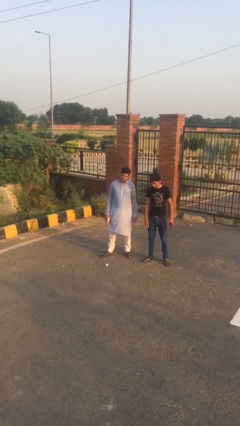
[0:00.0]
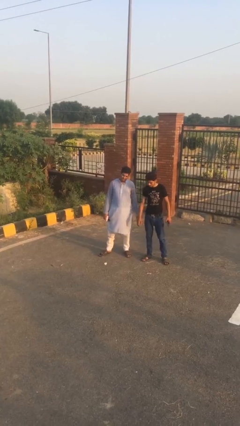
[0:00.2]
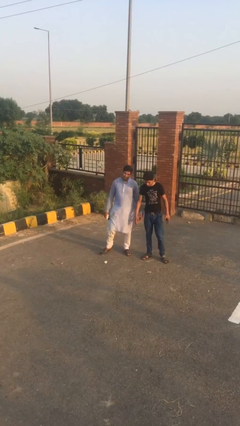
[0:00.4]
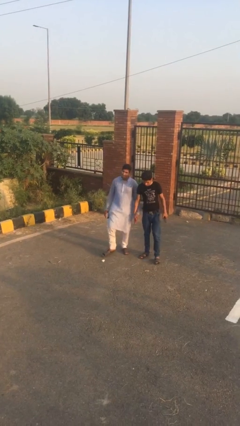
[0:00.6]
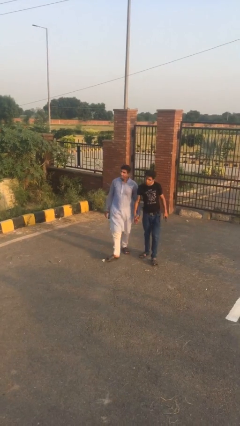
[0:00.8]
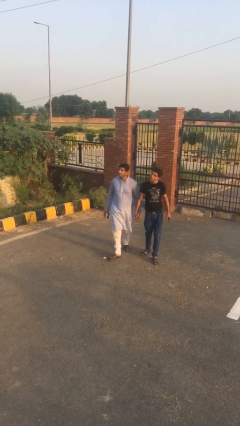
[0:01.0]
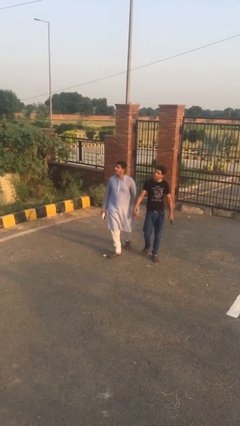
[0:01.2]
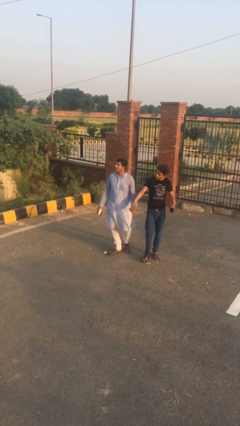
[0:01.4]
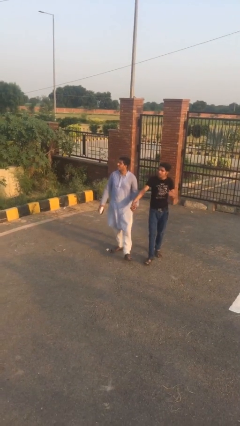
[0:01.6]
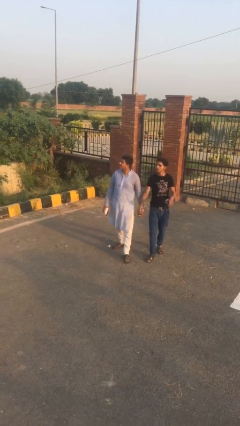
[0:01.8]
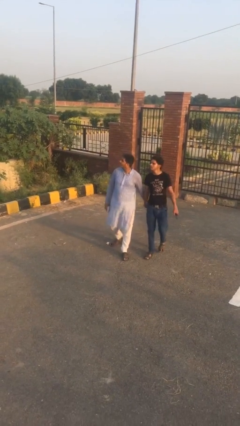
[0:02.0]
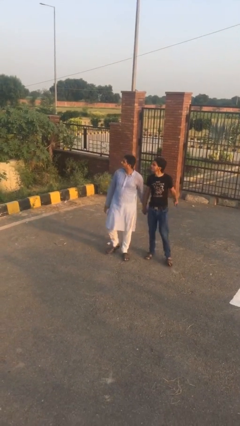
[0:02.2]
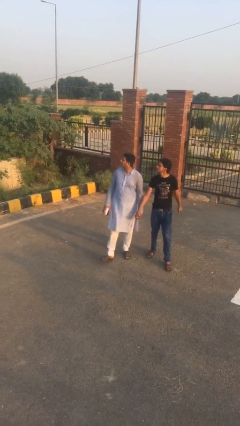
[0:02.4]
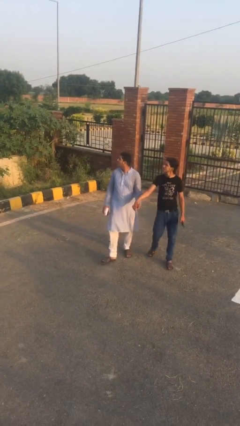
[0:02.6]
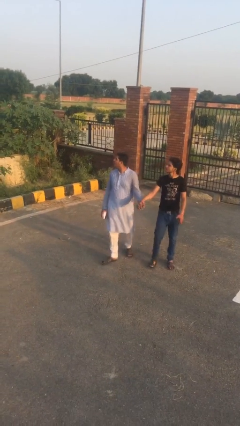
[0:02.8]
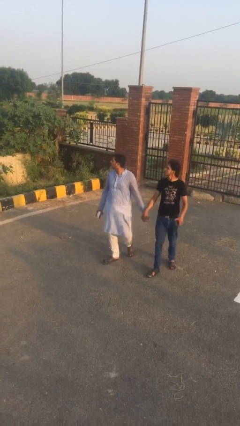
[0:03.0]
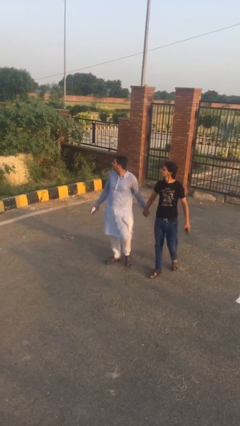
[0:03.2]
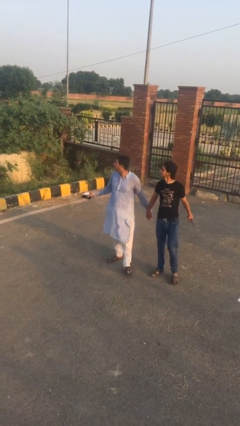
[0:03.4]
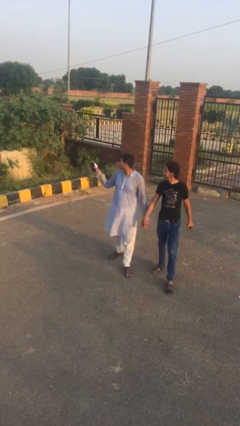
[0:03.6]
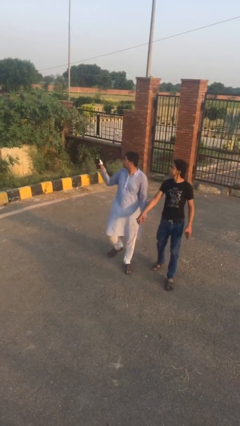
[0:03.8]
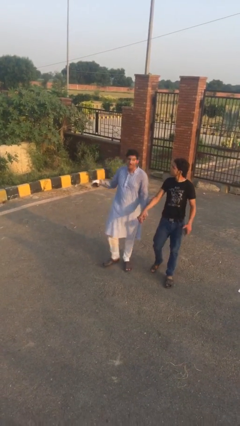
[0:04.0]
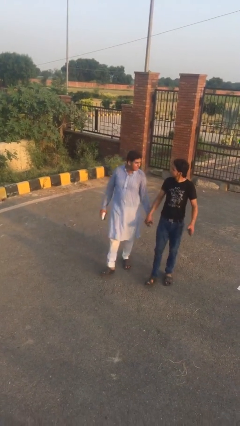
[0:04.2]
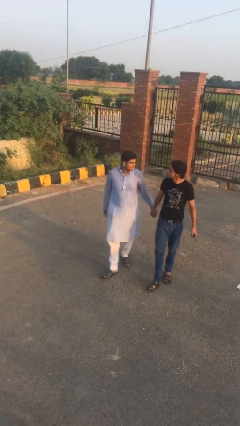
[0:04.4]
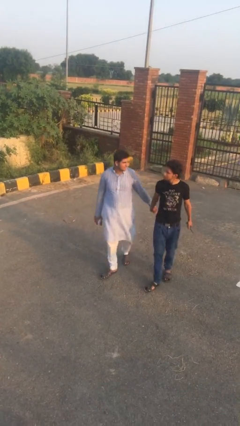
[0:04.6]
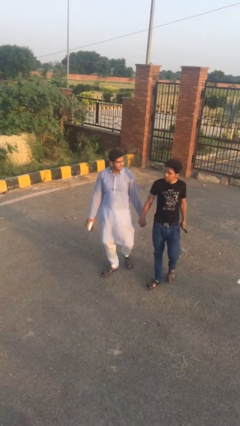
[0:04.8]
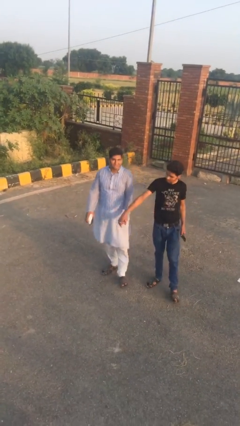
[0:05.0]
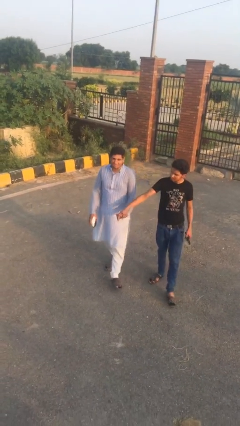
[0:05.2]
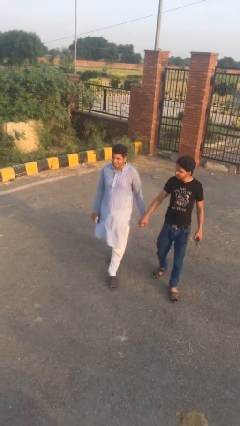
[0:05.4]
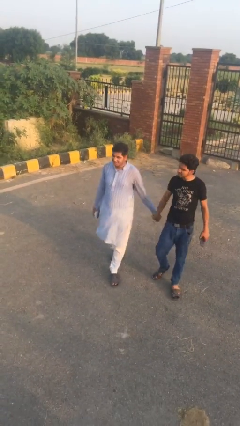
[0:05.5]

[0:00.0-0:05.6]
person holds hand

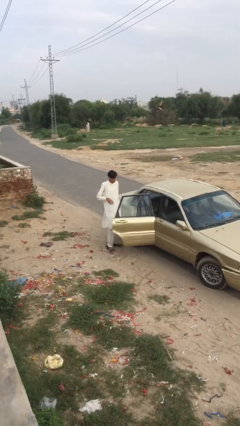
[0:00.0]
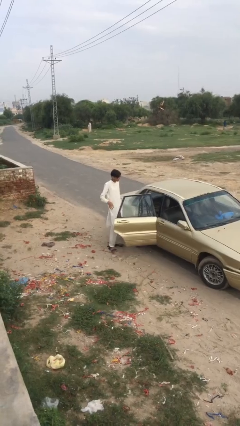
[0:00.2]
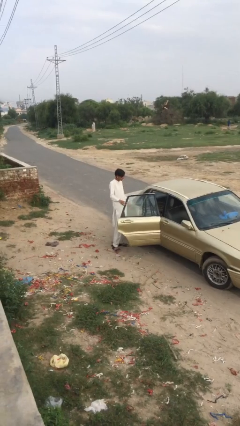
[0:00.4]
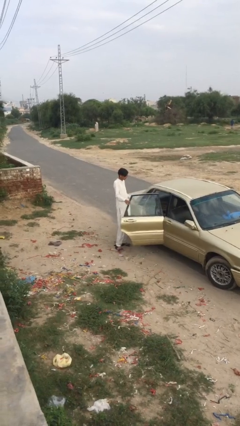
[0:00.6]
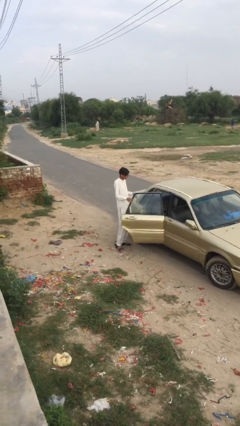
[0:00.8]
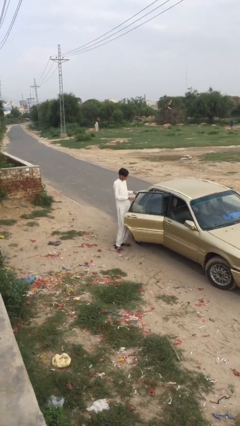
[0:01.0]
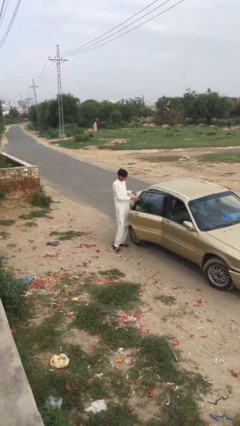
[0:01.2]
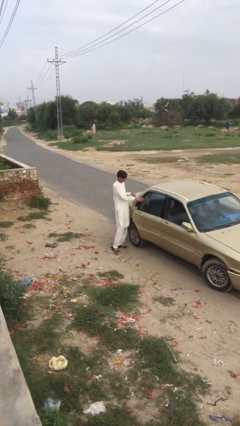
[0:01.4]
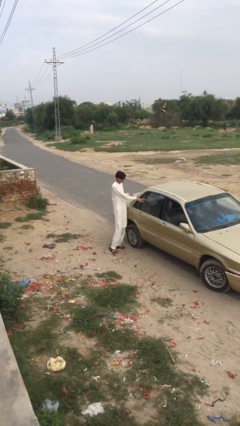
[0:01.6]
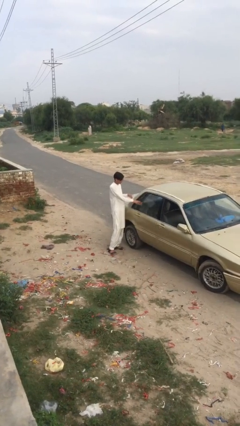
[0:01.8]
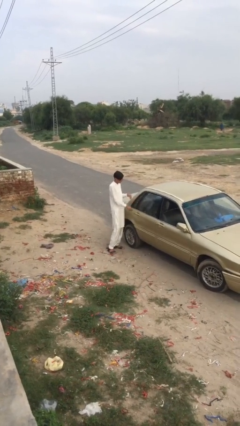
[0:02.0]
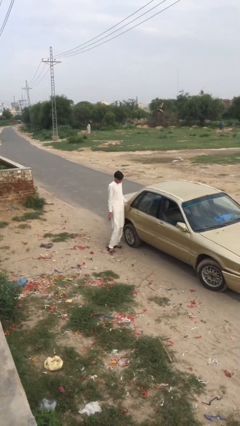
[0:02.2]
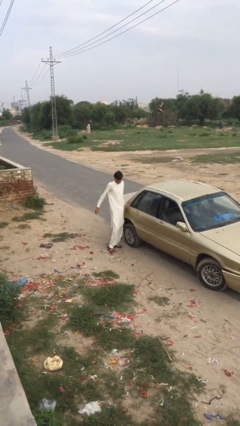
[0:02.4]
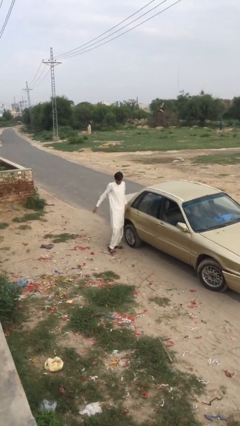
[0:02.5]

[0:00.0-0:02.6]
person closes car door

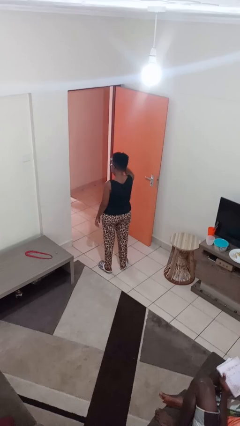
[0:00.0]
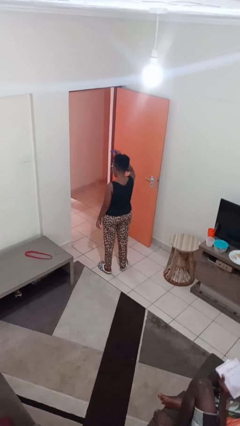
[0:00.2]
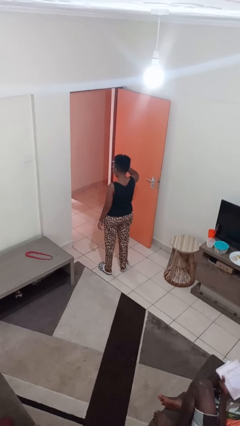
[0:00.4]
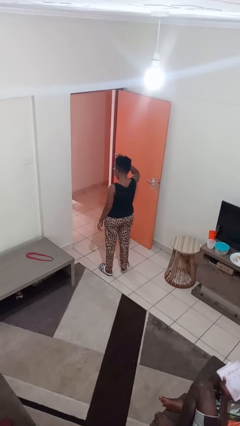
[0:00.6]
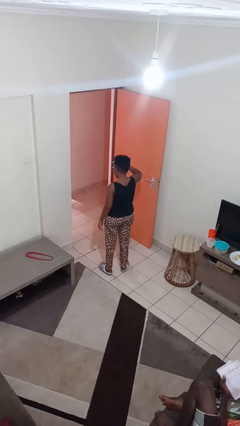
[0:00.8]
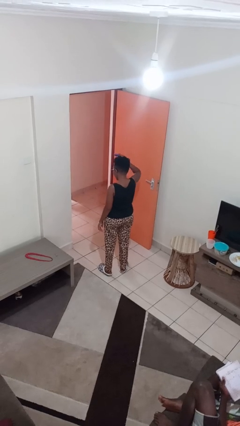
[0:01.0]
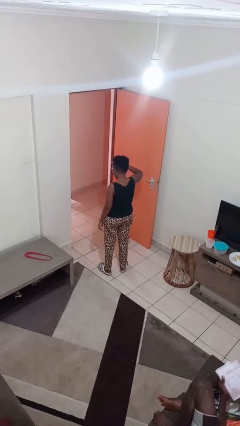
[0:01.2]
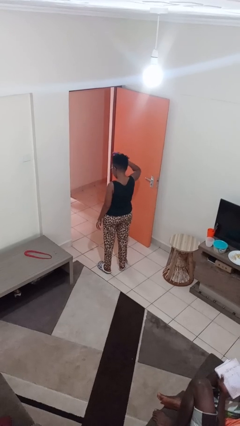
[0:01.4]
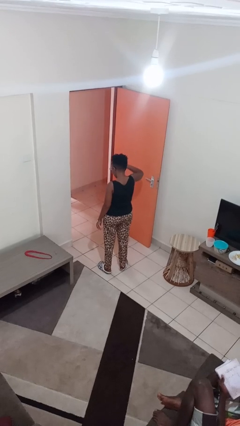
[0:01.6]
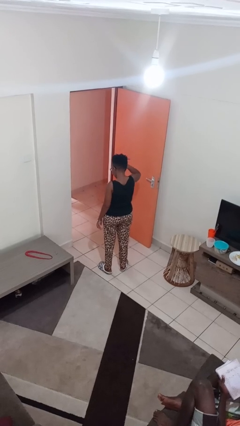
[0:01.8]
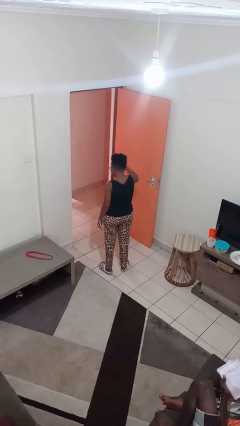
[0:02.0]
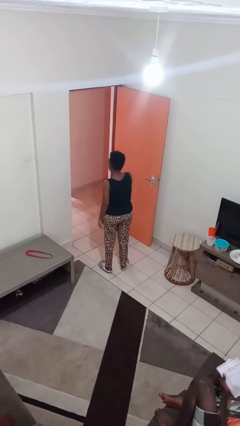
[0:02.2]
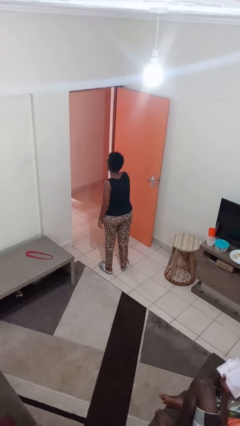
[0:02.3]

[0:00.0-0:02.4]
person brushes hair

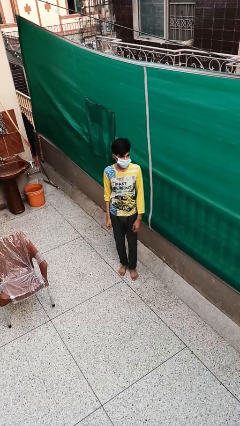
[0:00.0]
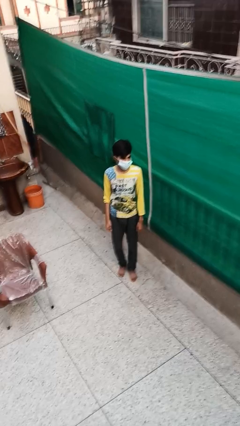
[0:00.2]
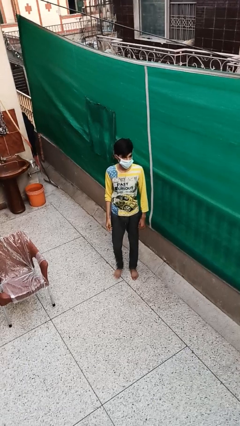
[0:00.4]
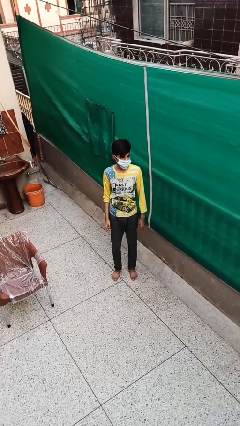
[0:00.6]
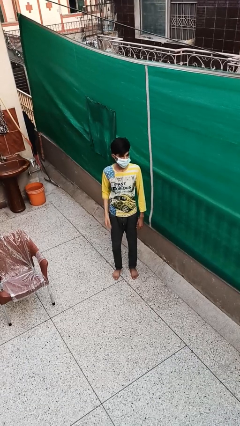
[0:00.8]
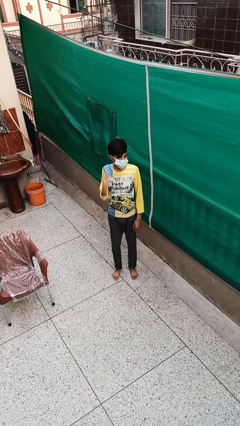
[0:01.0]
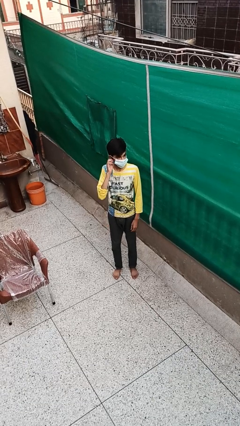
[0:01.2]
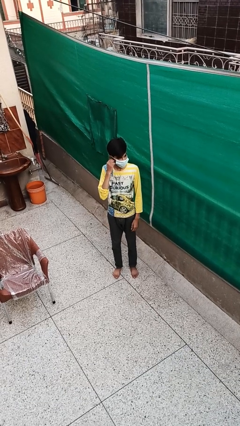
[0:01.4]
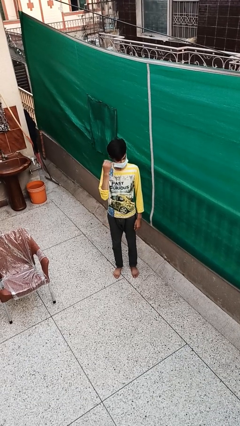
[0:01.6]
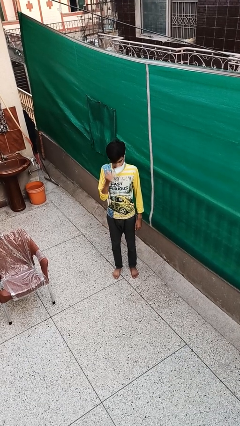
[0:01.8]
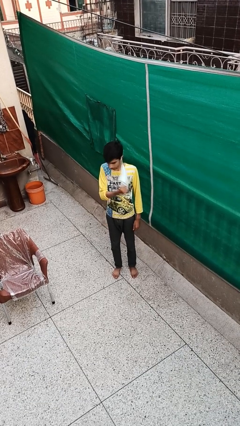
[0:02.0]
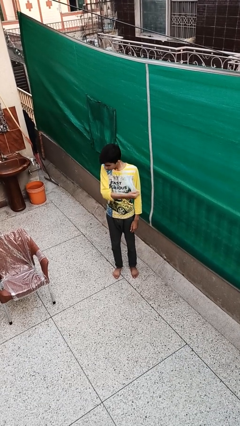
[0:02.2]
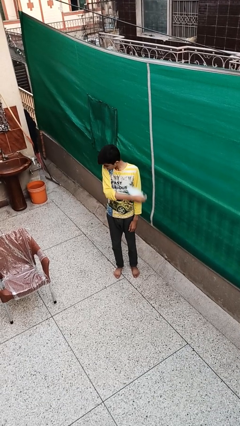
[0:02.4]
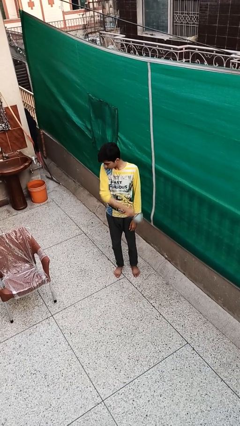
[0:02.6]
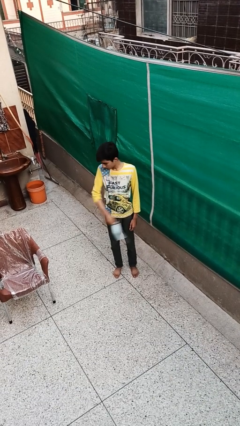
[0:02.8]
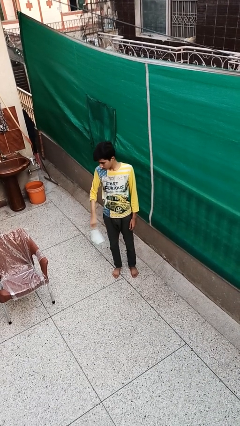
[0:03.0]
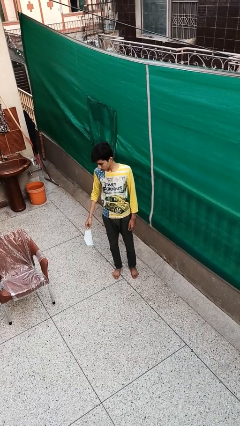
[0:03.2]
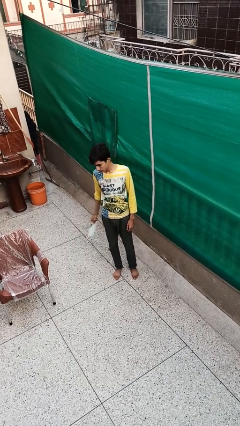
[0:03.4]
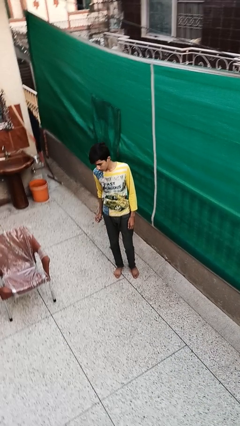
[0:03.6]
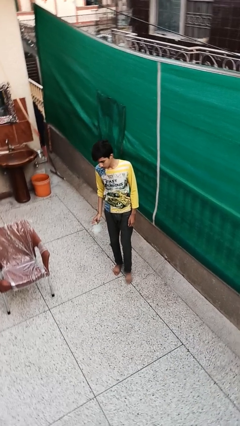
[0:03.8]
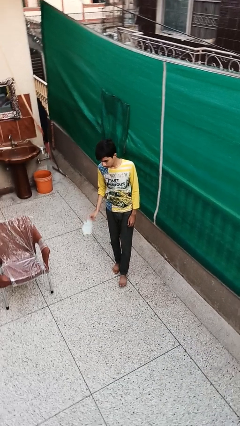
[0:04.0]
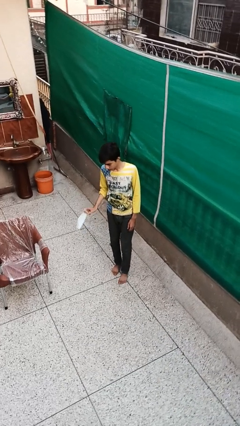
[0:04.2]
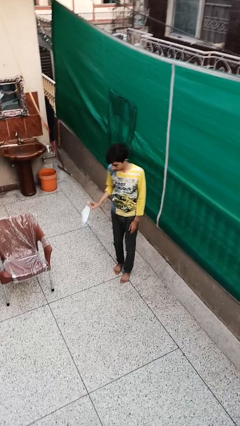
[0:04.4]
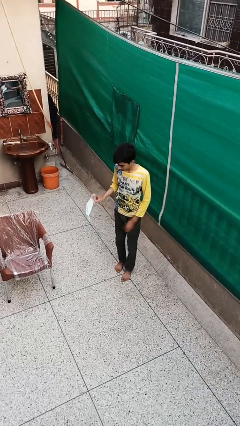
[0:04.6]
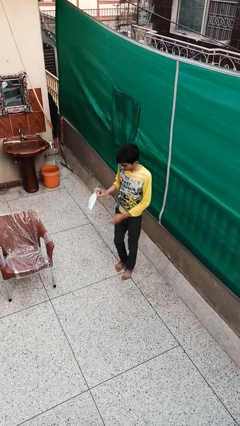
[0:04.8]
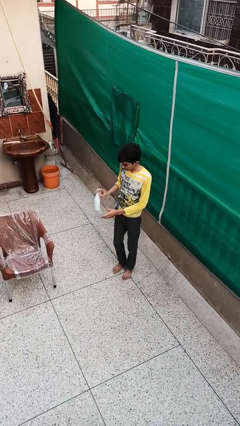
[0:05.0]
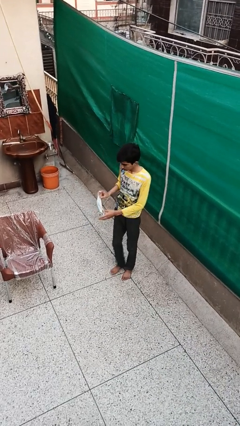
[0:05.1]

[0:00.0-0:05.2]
person takes off facemask

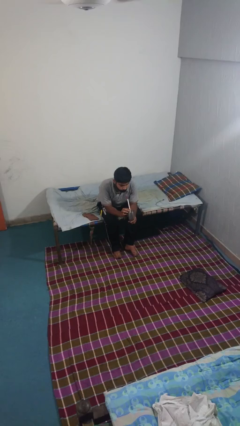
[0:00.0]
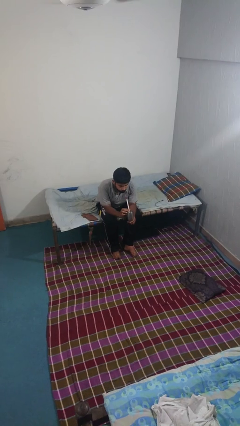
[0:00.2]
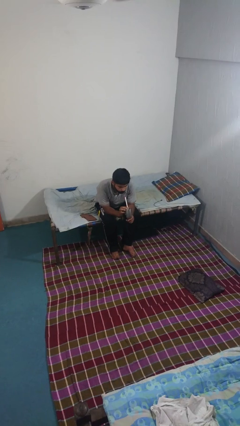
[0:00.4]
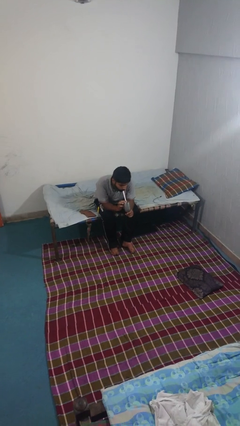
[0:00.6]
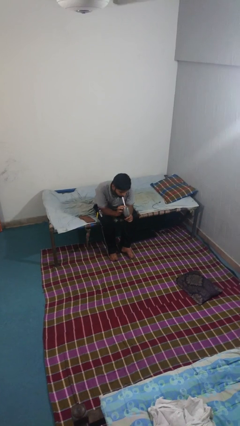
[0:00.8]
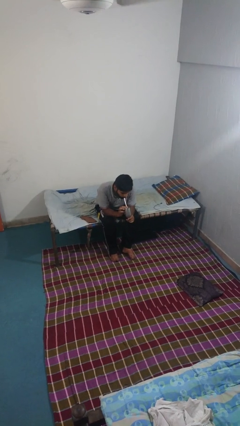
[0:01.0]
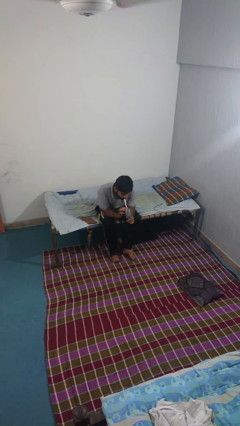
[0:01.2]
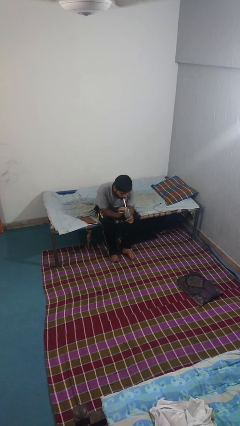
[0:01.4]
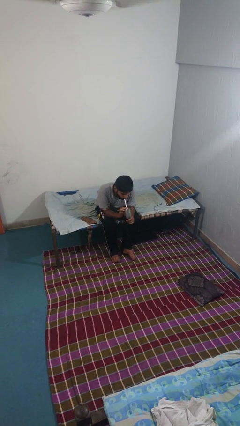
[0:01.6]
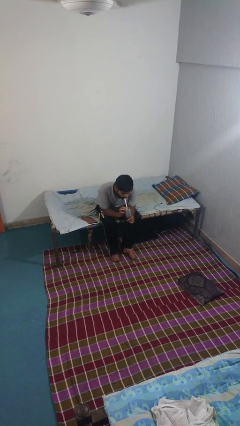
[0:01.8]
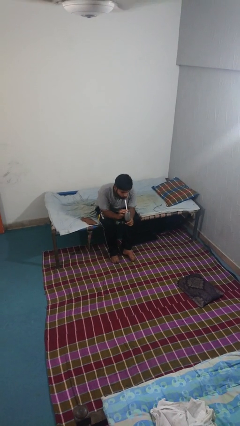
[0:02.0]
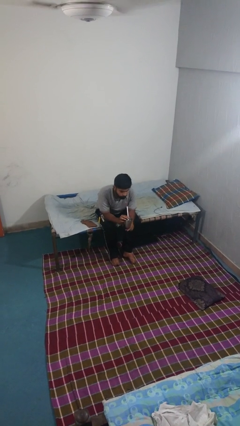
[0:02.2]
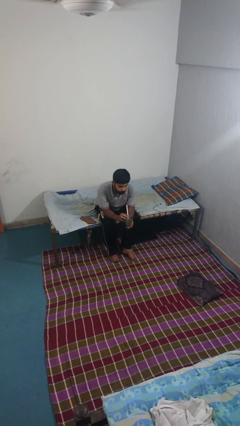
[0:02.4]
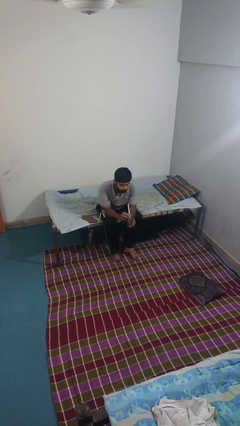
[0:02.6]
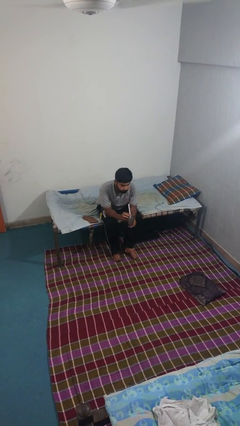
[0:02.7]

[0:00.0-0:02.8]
person drinks from straw
